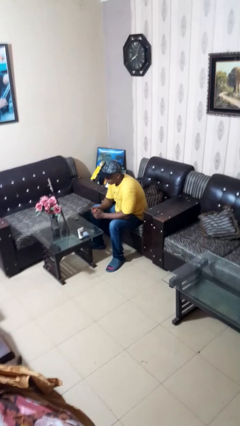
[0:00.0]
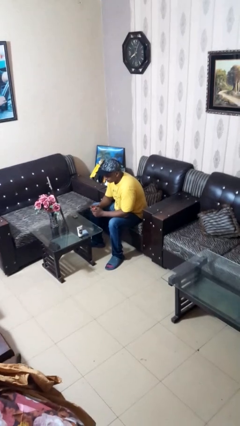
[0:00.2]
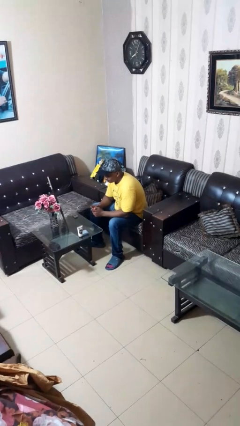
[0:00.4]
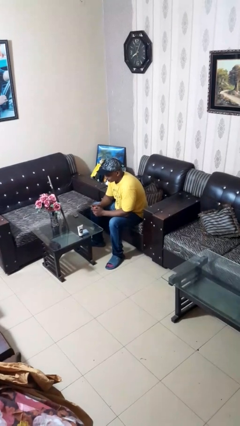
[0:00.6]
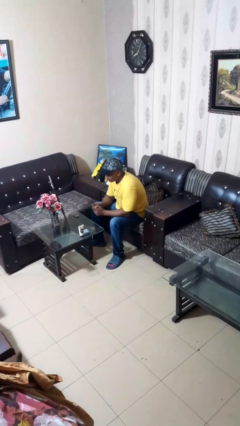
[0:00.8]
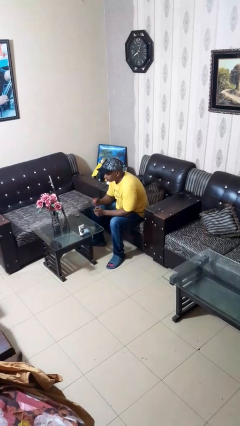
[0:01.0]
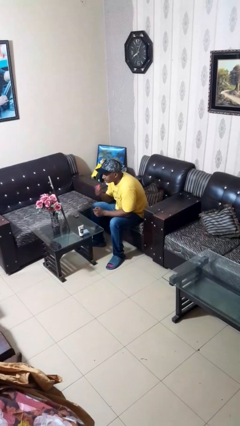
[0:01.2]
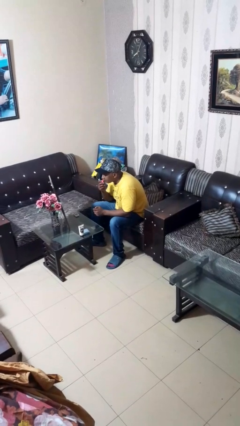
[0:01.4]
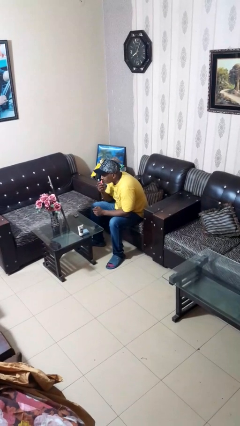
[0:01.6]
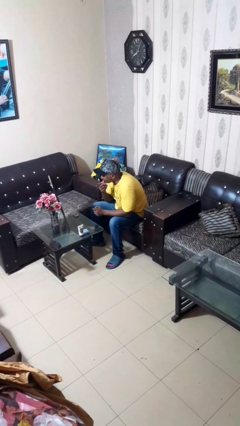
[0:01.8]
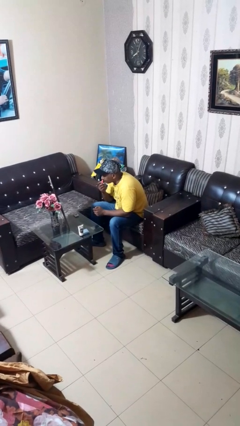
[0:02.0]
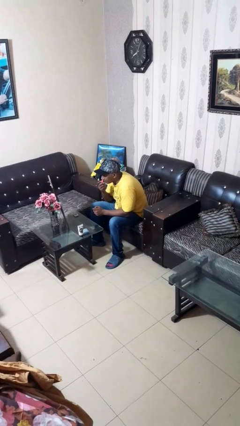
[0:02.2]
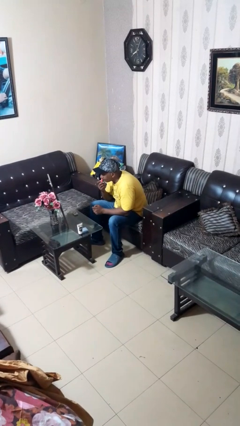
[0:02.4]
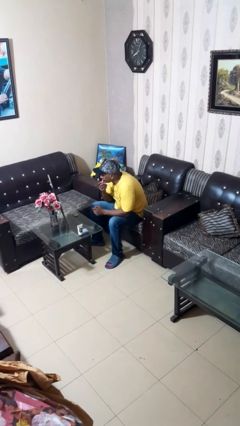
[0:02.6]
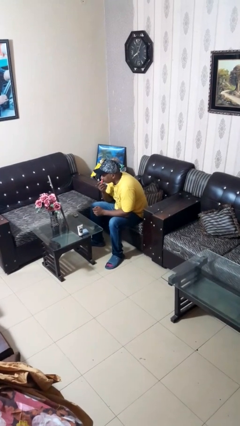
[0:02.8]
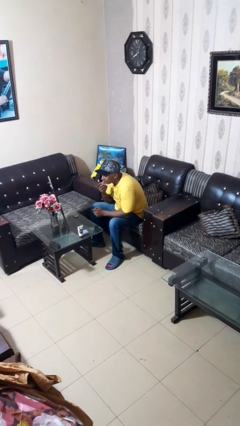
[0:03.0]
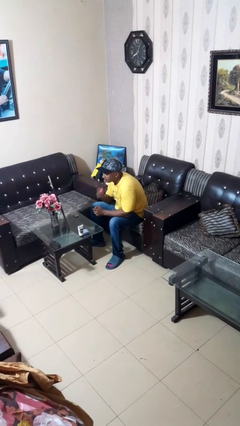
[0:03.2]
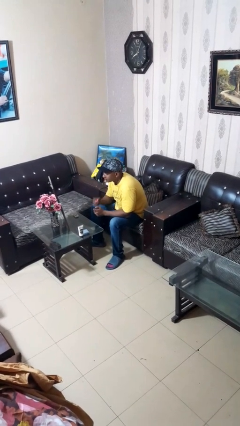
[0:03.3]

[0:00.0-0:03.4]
person applies lip makeup

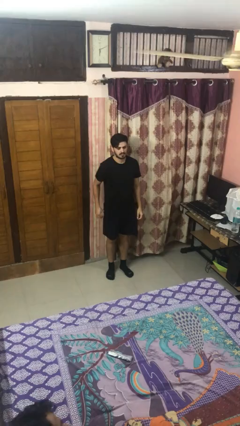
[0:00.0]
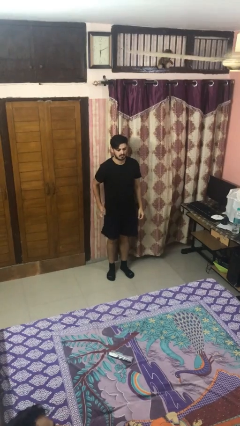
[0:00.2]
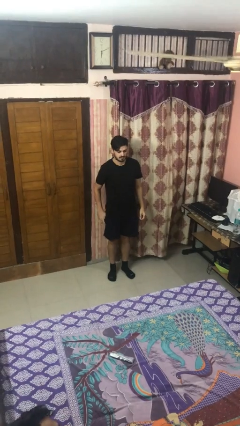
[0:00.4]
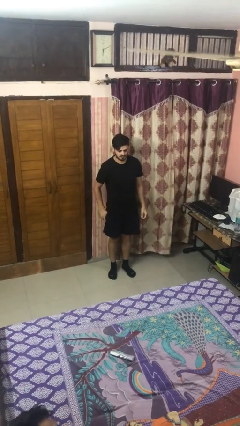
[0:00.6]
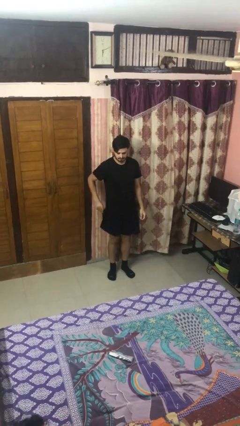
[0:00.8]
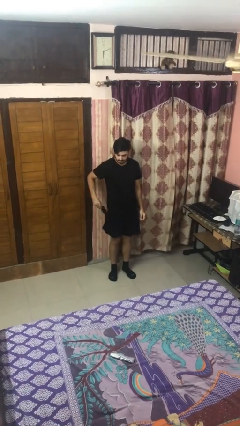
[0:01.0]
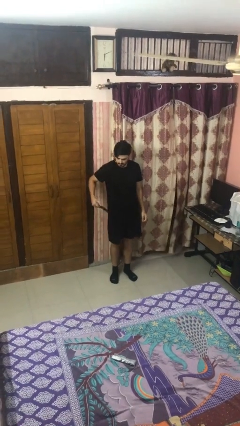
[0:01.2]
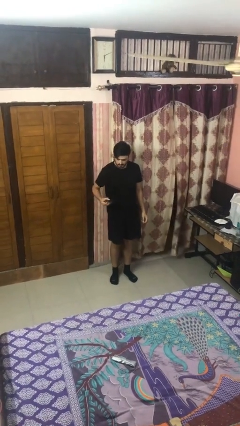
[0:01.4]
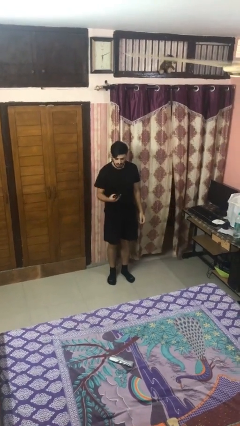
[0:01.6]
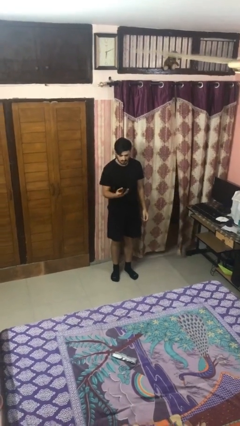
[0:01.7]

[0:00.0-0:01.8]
person takes phone from pocket

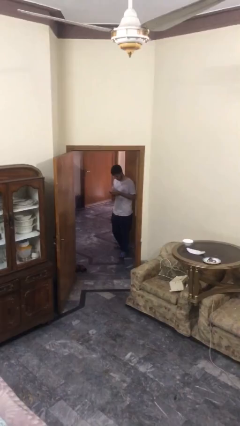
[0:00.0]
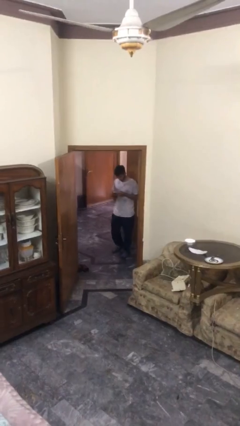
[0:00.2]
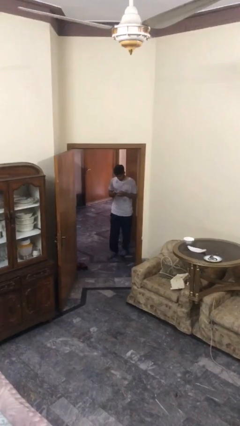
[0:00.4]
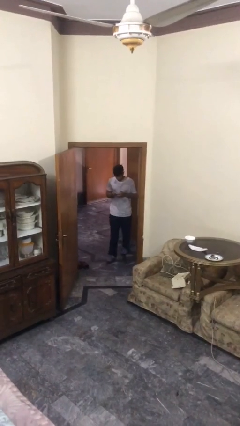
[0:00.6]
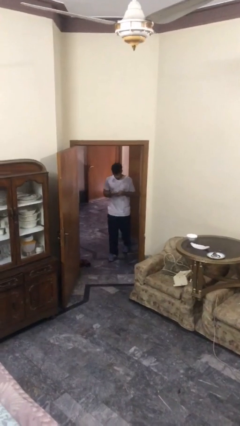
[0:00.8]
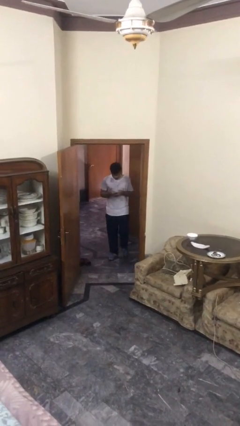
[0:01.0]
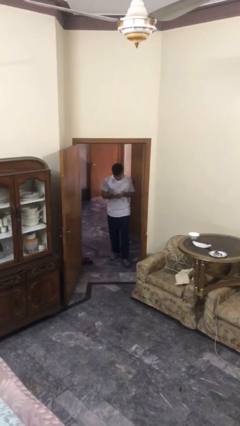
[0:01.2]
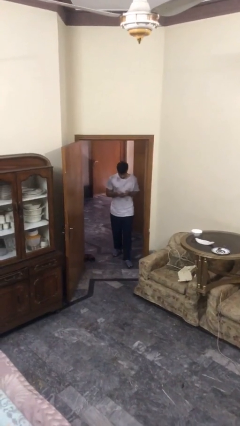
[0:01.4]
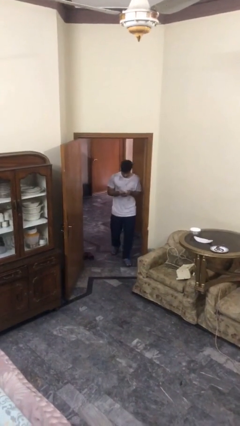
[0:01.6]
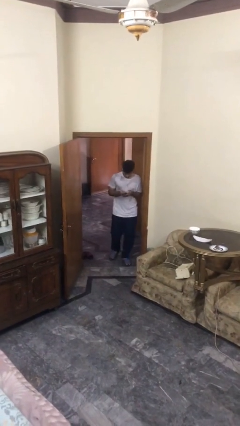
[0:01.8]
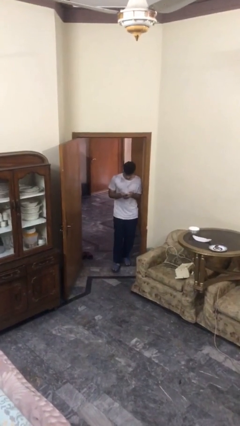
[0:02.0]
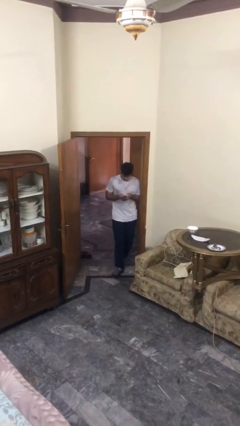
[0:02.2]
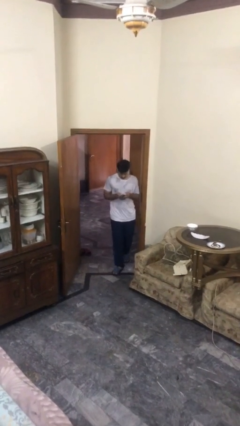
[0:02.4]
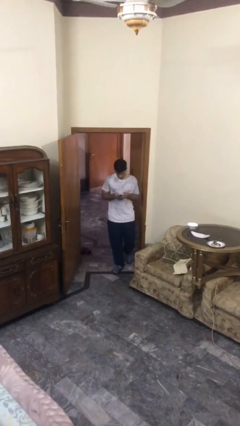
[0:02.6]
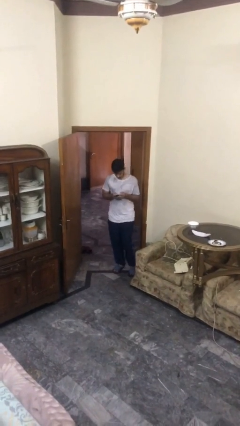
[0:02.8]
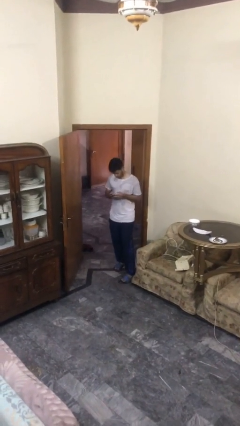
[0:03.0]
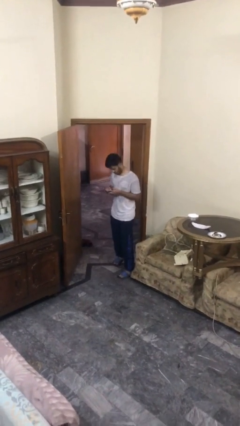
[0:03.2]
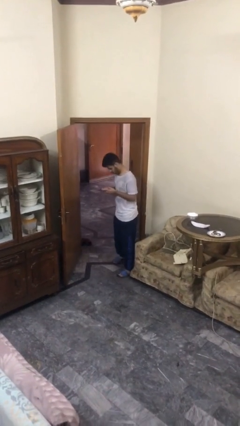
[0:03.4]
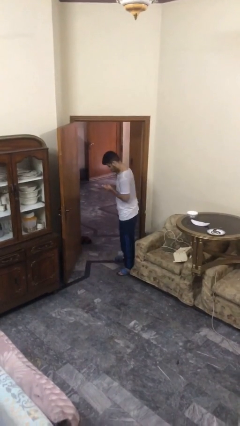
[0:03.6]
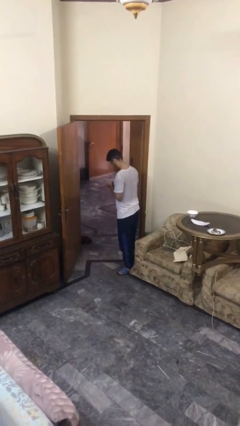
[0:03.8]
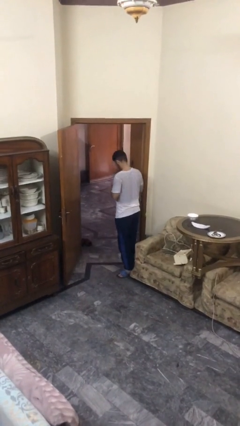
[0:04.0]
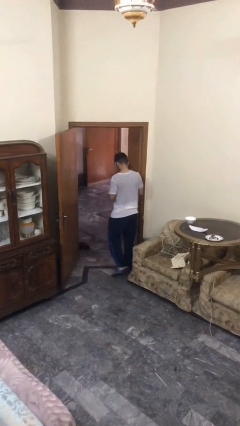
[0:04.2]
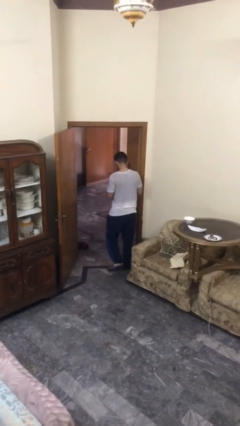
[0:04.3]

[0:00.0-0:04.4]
person enters scene through structure

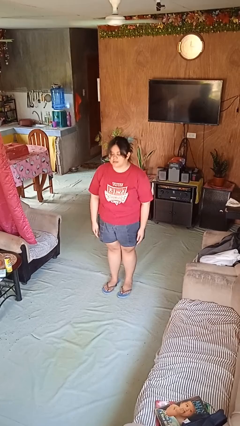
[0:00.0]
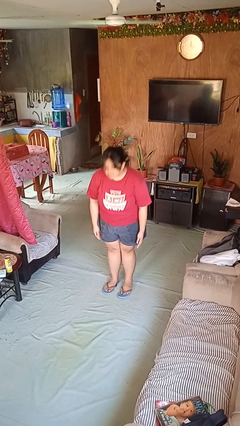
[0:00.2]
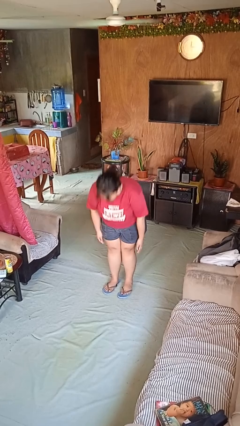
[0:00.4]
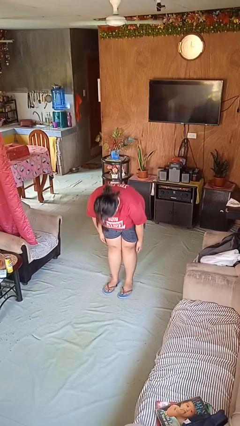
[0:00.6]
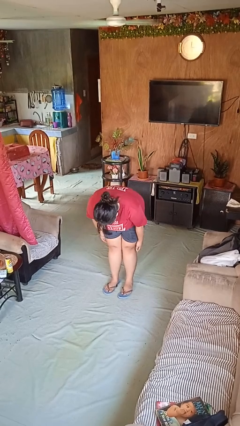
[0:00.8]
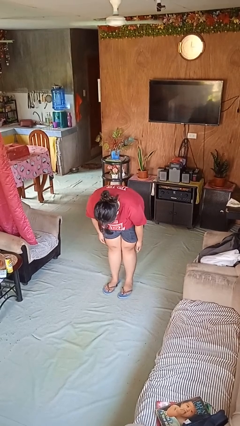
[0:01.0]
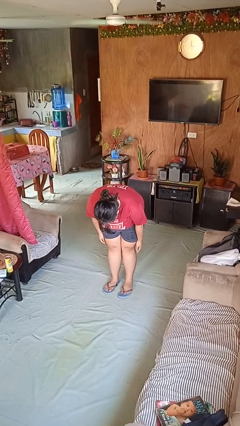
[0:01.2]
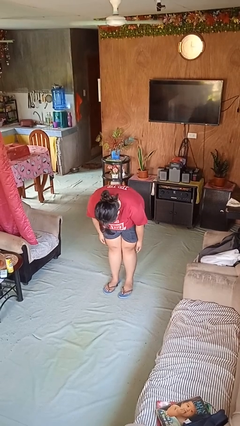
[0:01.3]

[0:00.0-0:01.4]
person bows

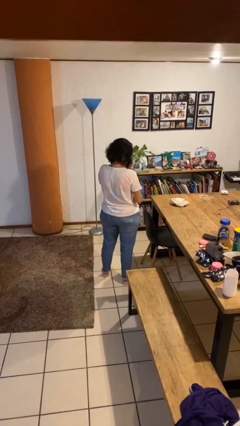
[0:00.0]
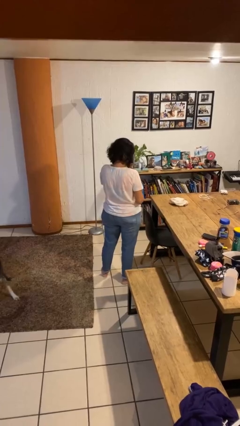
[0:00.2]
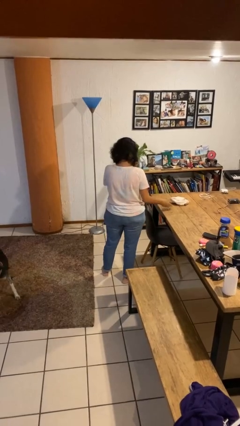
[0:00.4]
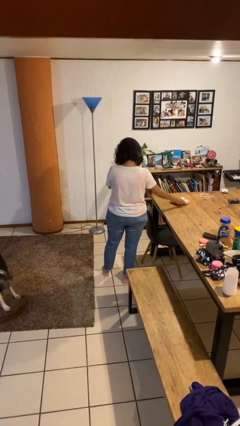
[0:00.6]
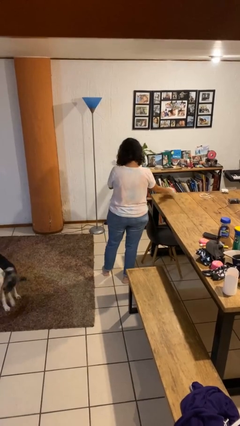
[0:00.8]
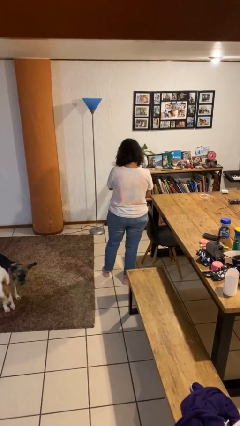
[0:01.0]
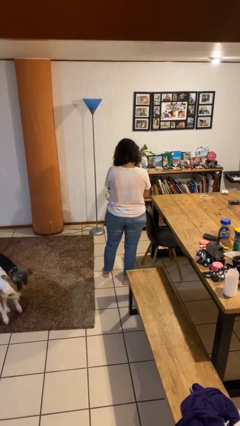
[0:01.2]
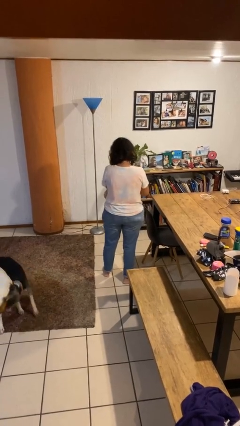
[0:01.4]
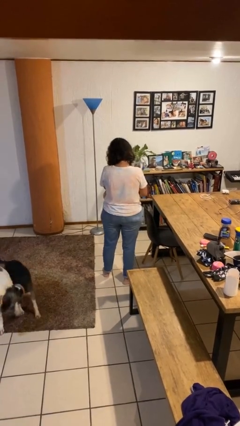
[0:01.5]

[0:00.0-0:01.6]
person picks up object from table

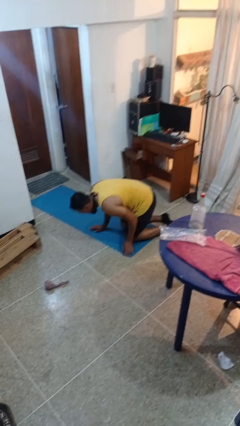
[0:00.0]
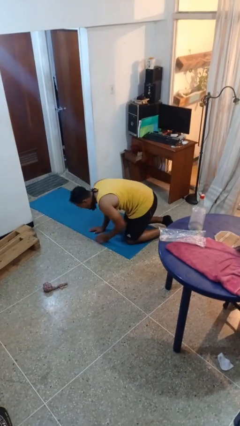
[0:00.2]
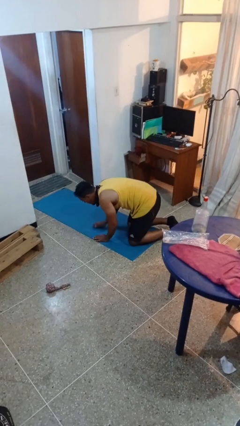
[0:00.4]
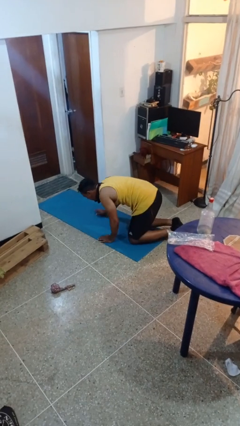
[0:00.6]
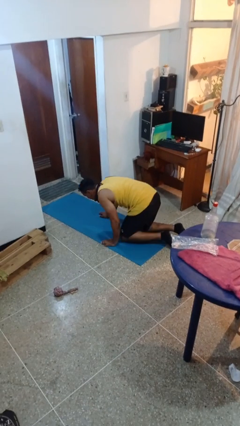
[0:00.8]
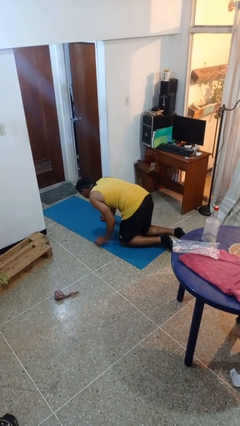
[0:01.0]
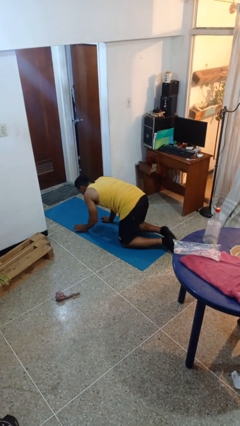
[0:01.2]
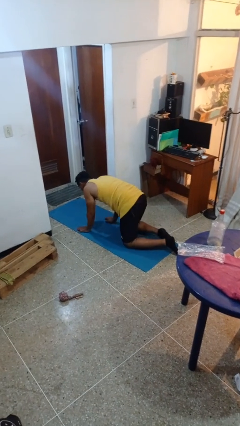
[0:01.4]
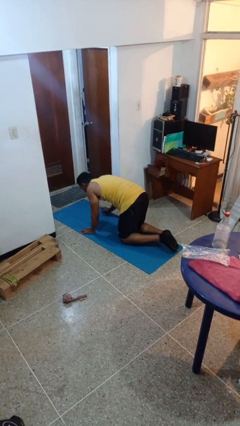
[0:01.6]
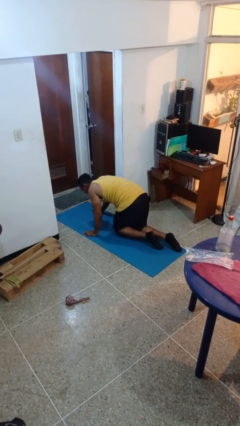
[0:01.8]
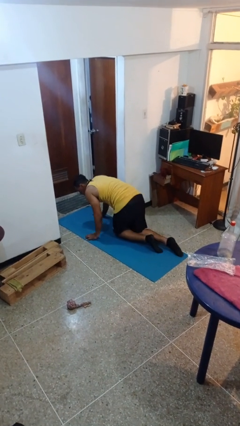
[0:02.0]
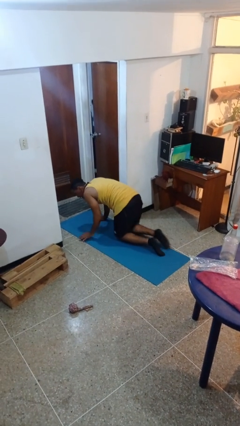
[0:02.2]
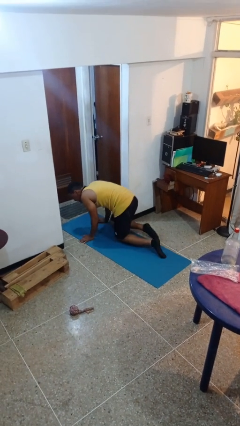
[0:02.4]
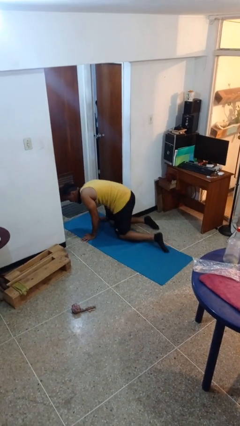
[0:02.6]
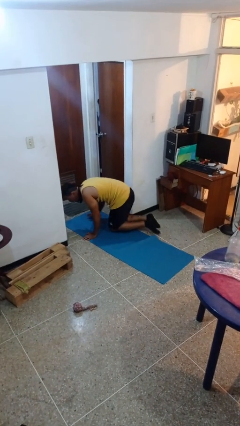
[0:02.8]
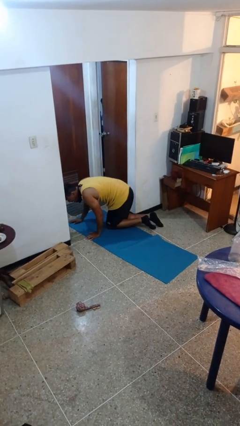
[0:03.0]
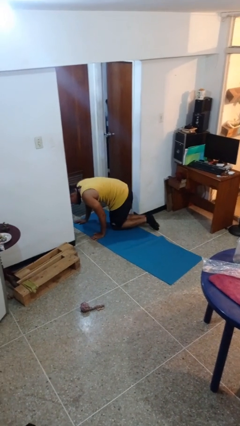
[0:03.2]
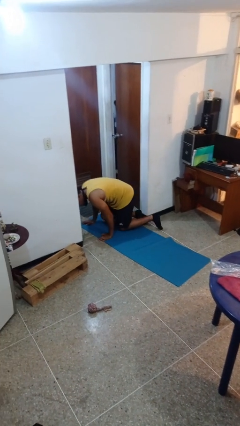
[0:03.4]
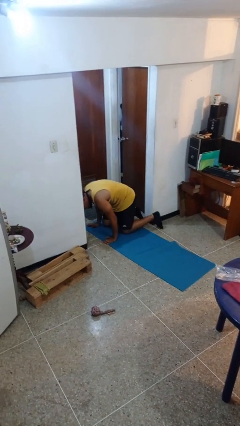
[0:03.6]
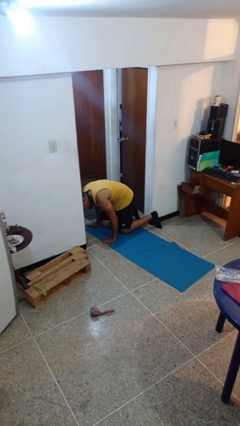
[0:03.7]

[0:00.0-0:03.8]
person crawls

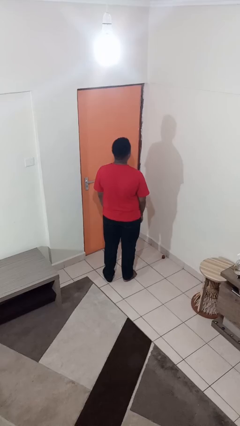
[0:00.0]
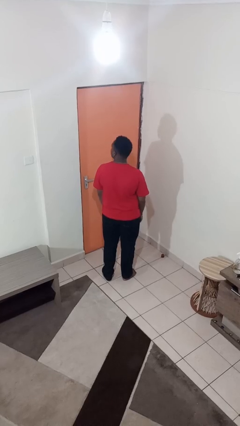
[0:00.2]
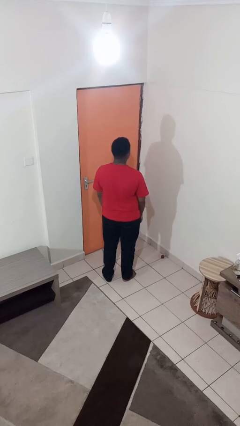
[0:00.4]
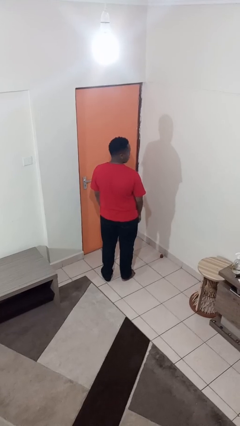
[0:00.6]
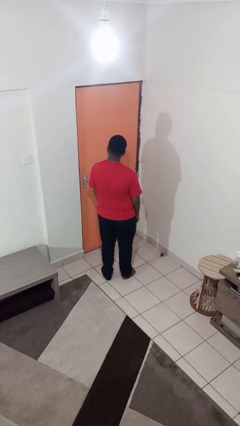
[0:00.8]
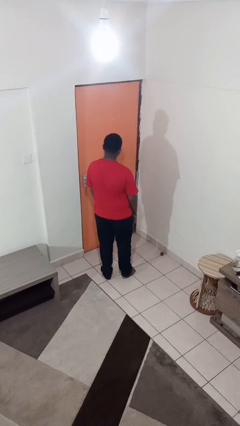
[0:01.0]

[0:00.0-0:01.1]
person shakes head
